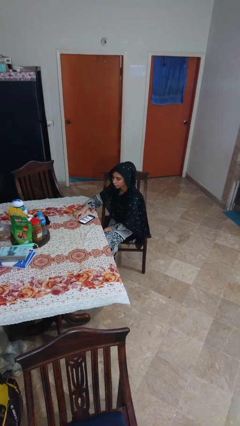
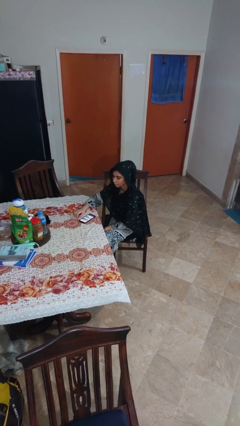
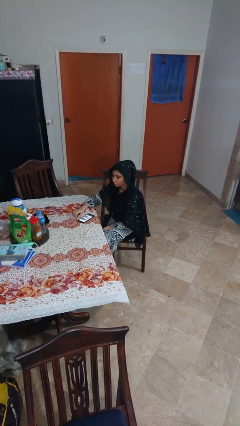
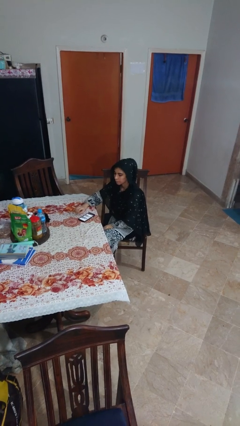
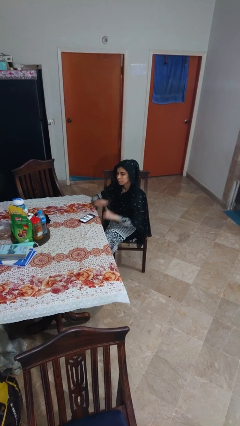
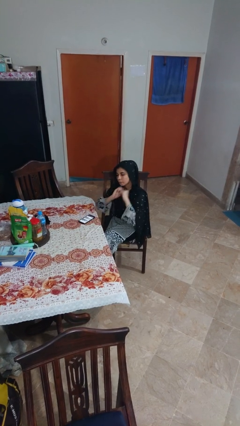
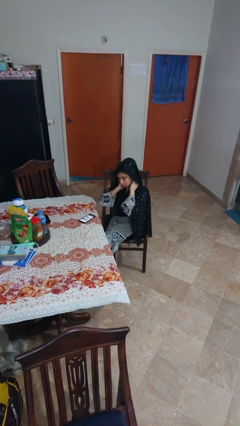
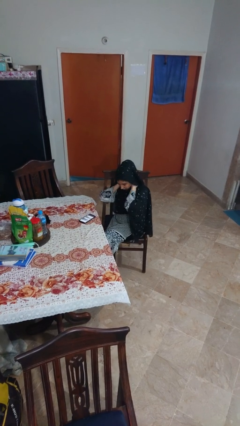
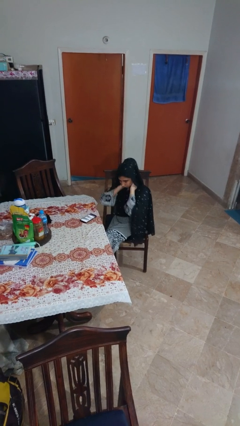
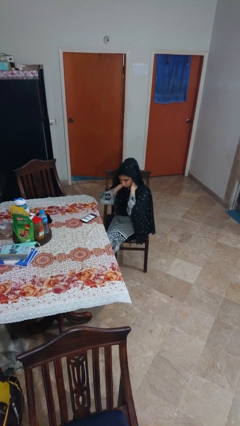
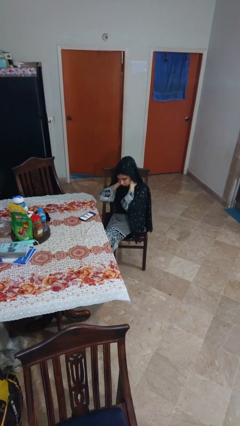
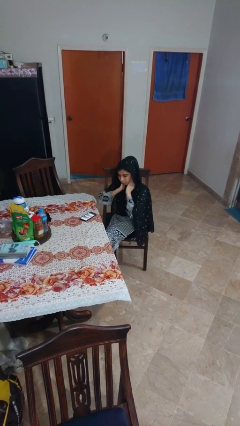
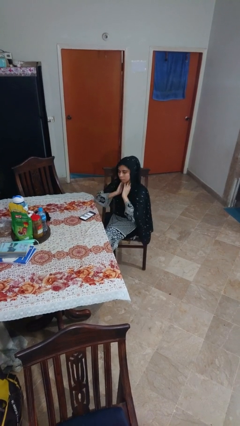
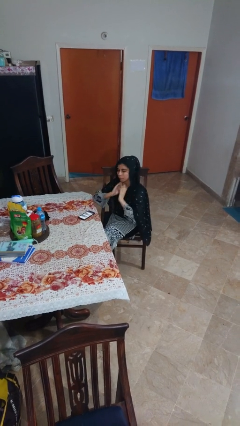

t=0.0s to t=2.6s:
person rubs neck

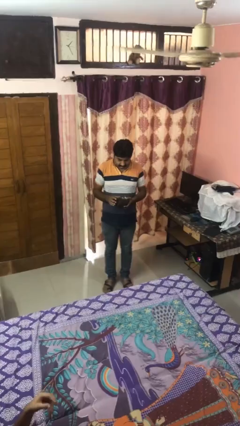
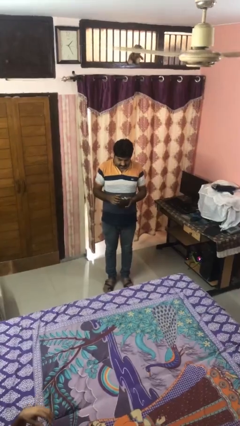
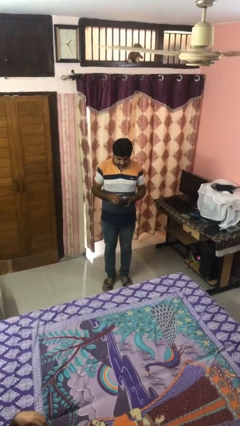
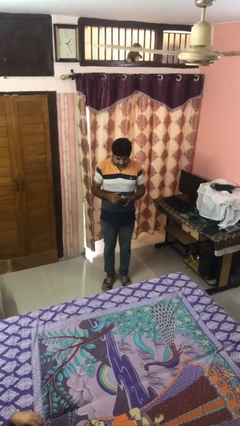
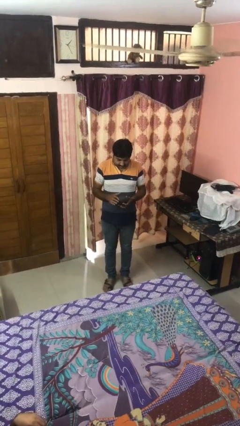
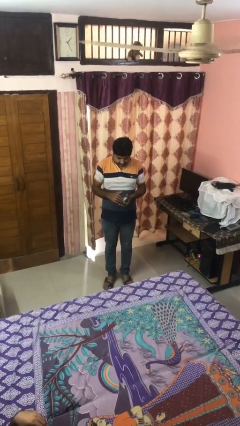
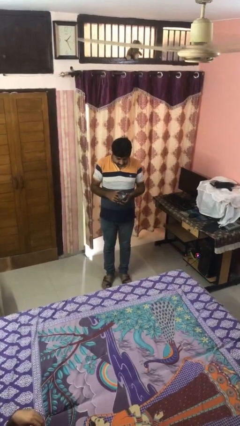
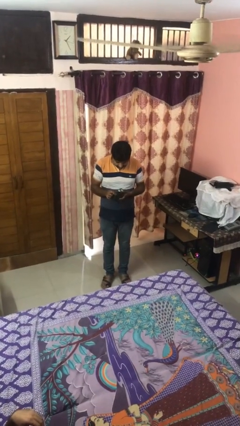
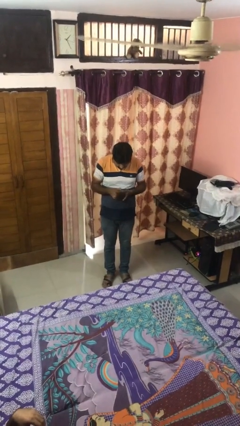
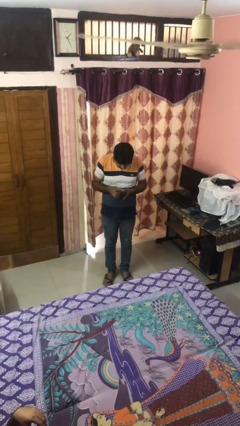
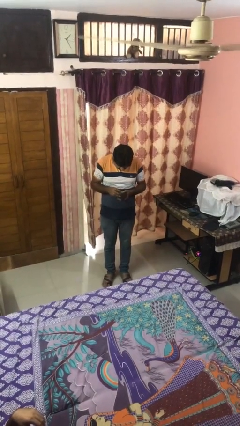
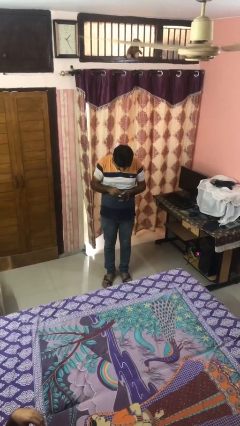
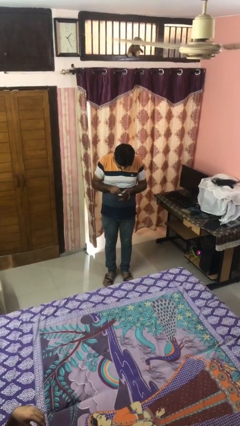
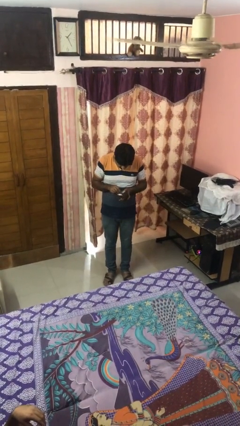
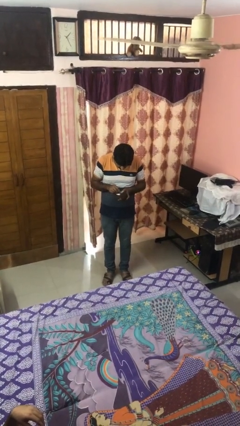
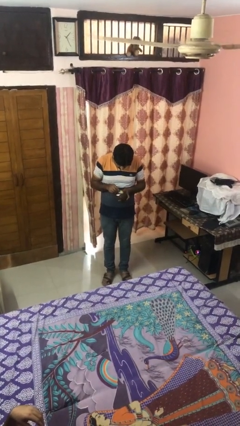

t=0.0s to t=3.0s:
person searches in purse

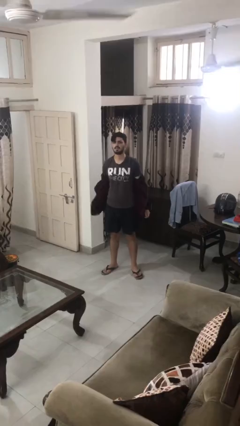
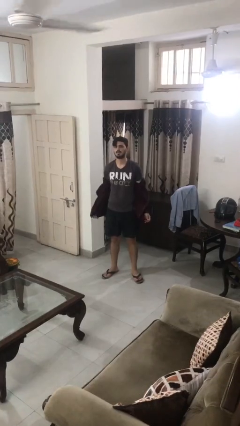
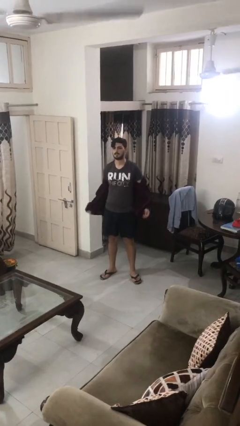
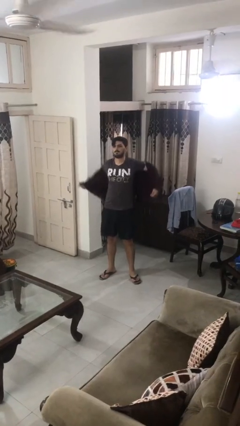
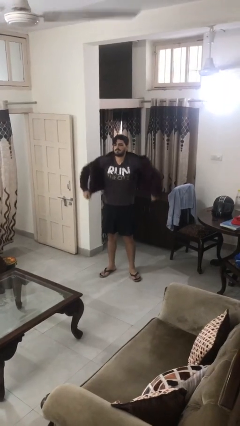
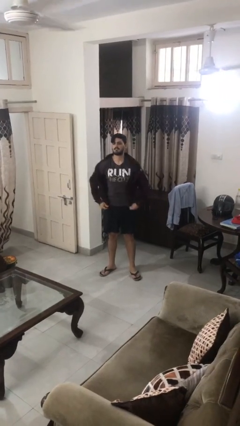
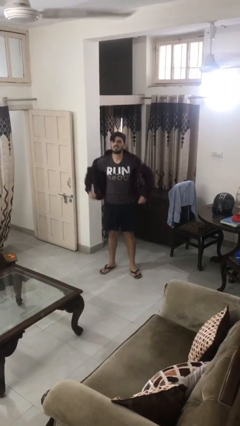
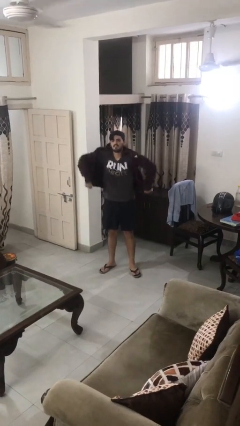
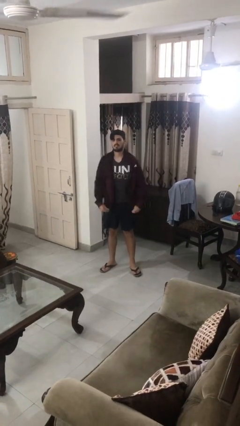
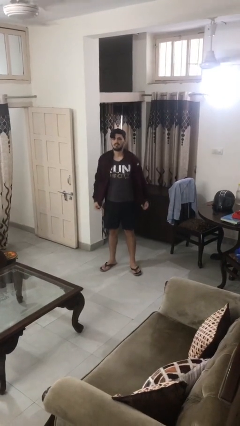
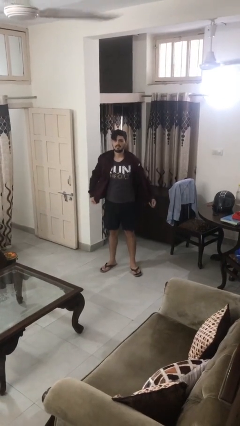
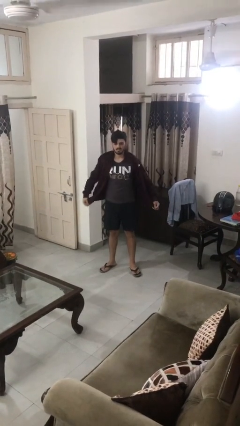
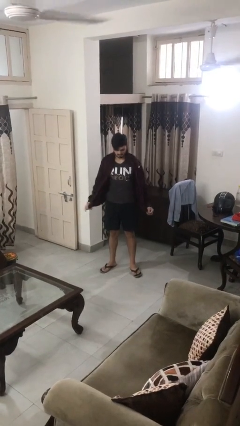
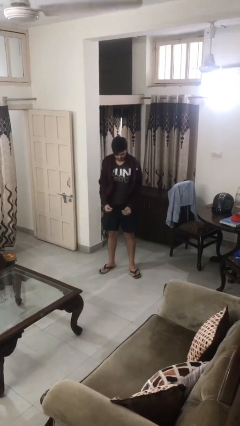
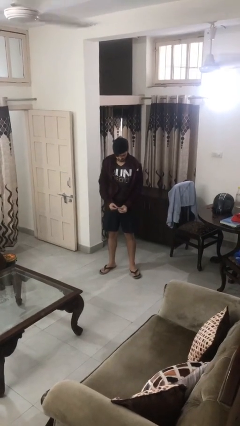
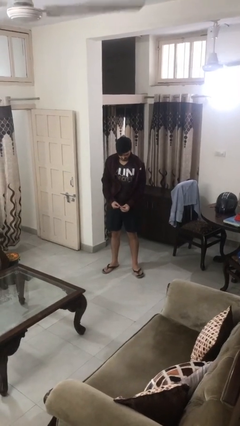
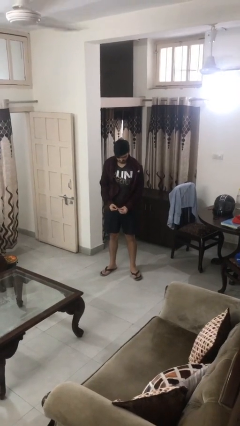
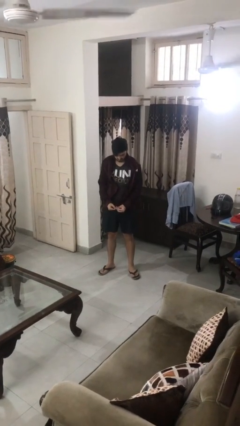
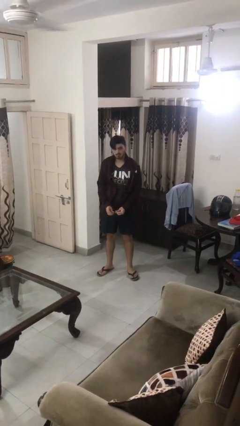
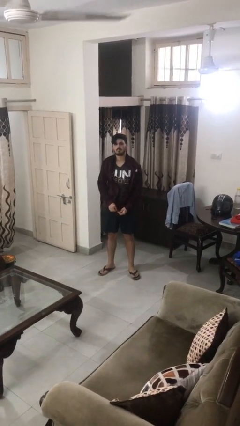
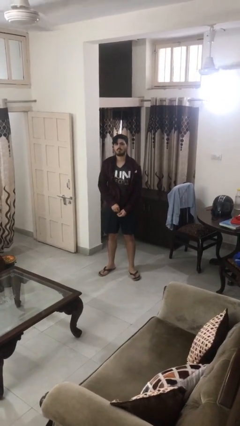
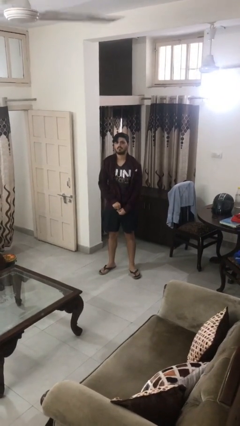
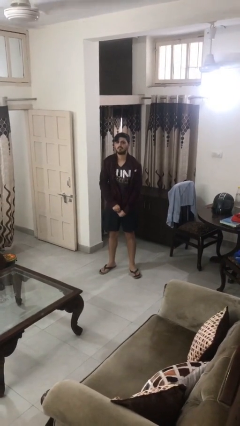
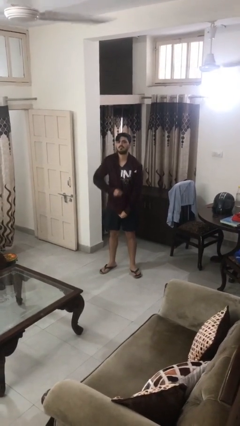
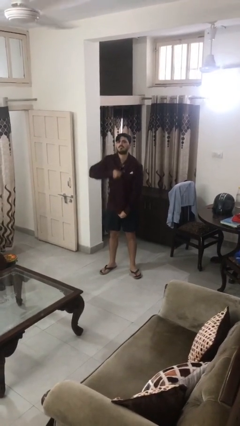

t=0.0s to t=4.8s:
person puts on jacket

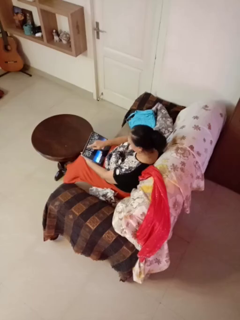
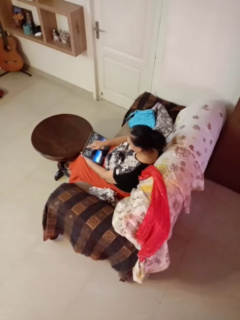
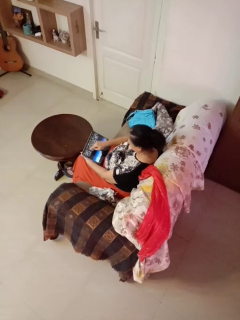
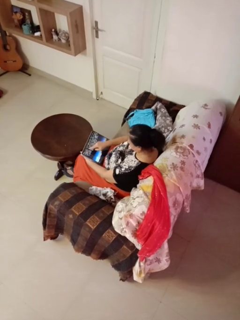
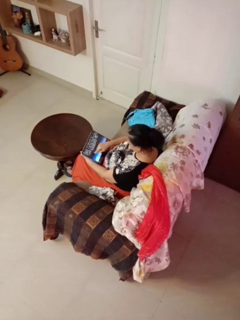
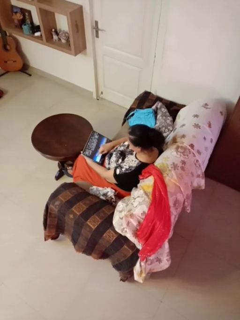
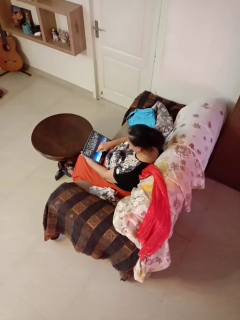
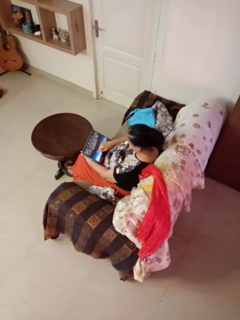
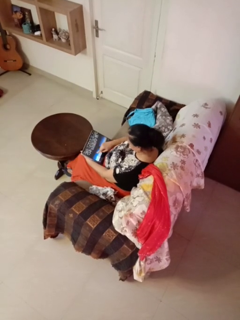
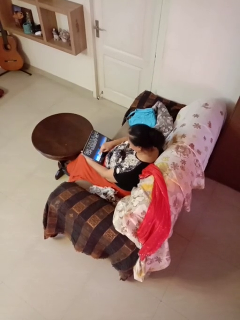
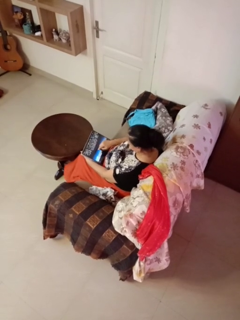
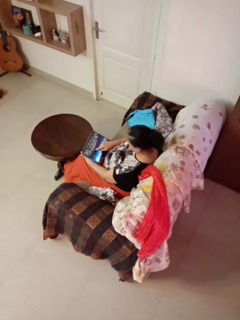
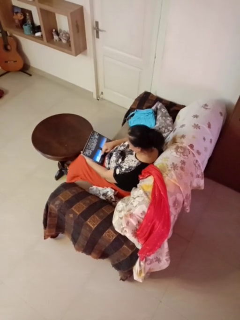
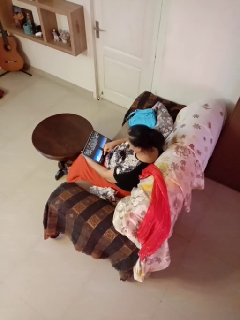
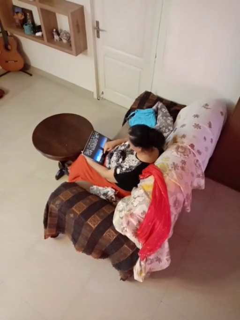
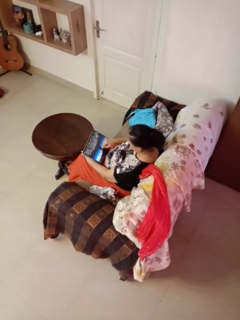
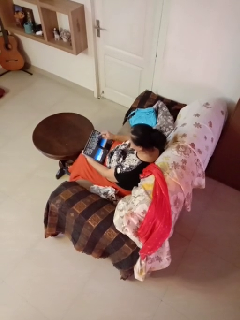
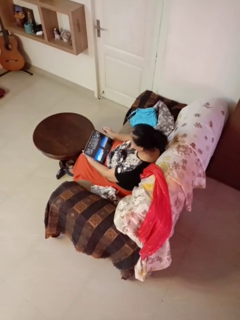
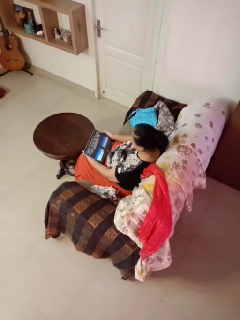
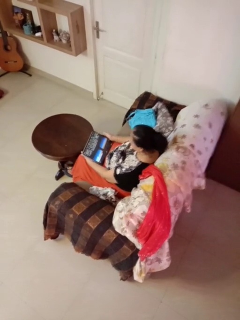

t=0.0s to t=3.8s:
person interacts with tablet

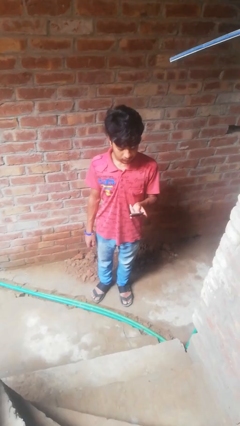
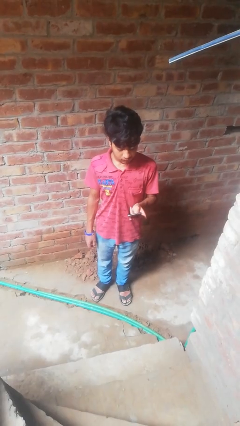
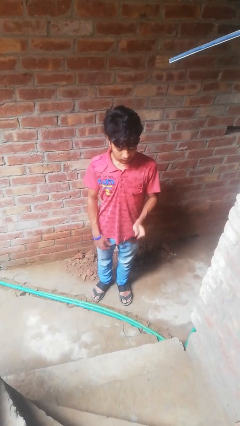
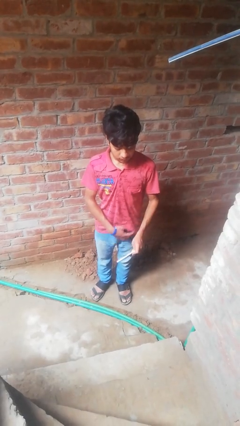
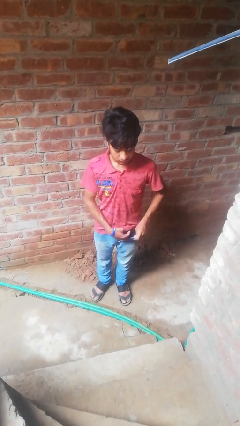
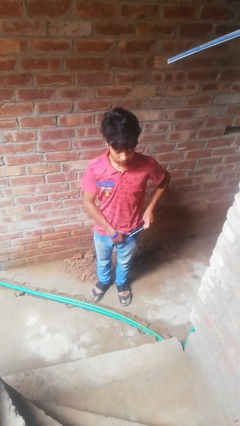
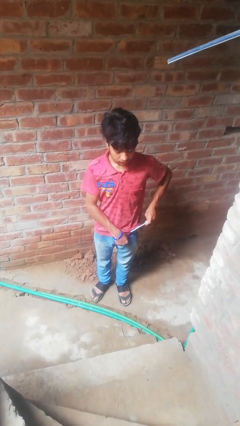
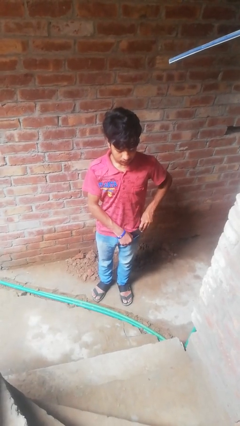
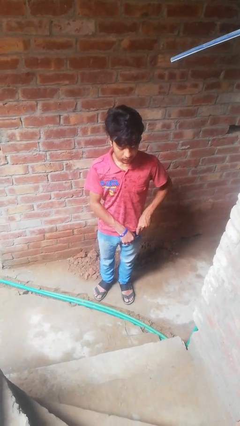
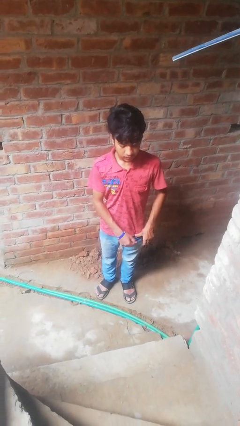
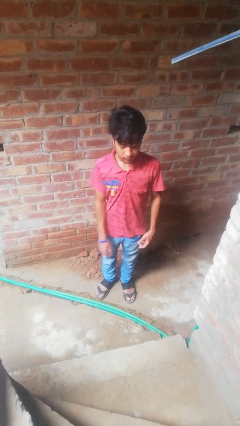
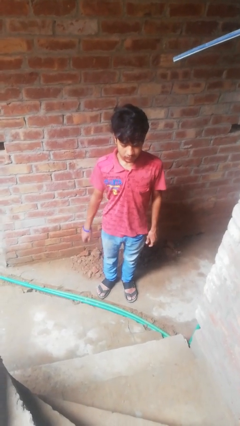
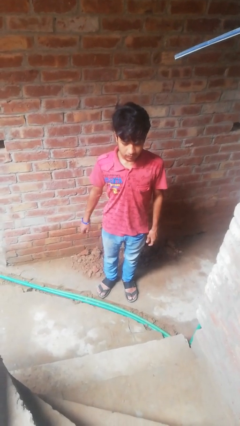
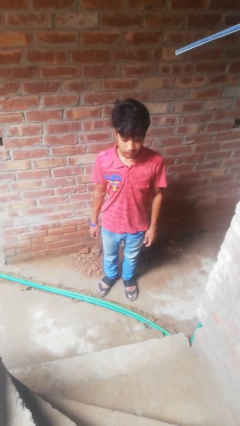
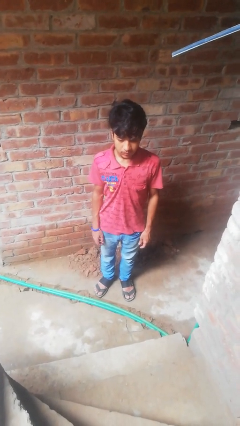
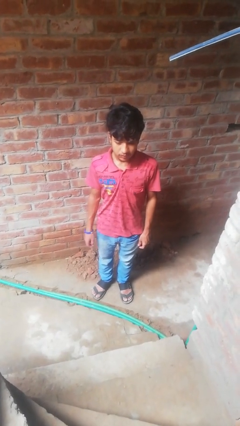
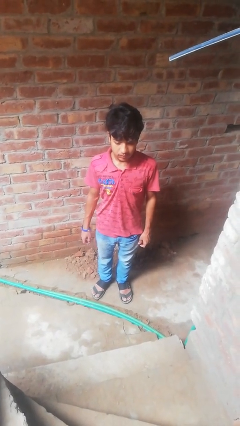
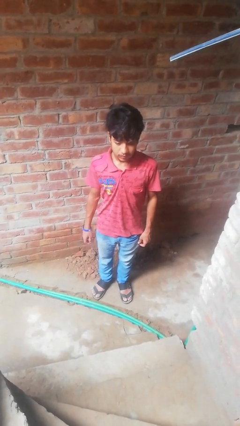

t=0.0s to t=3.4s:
person puts phone into pocket

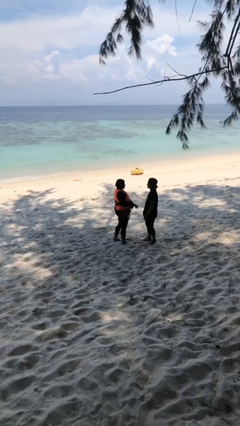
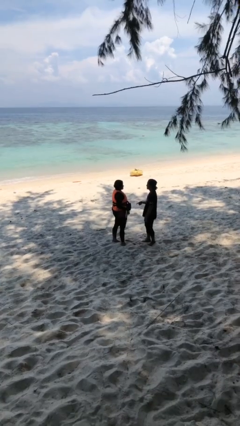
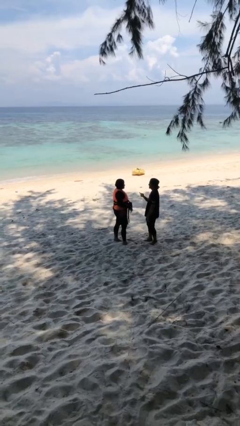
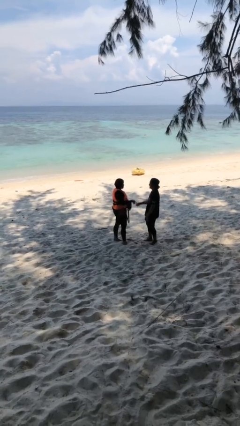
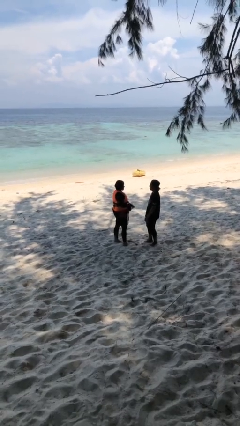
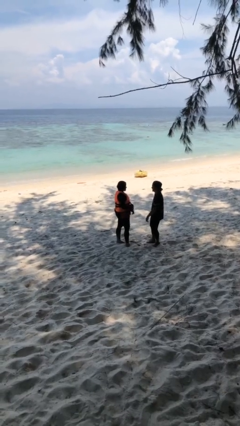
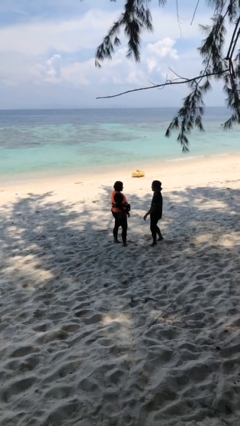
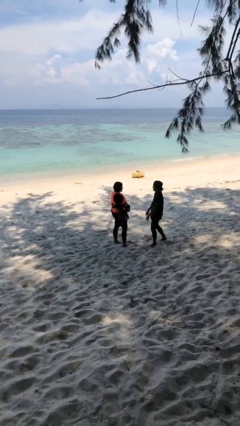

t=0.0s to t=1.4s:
person talks to person
